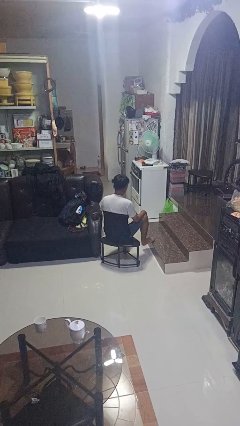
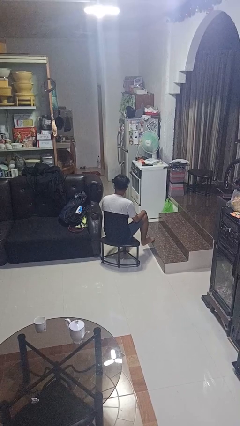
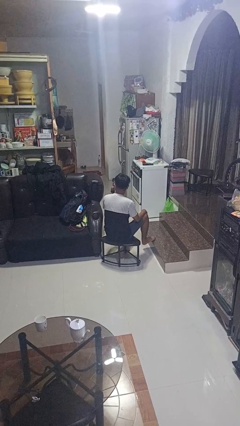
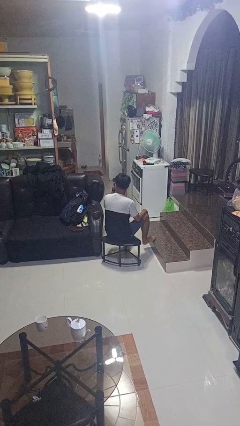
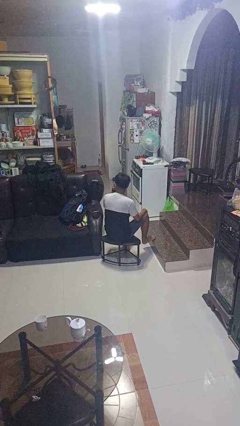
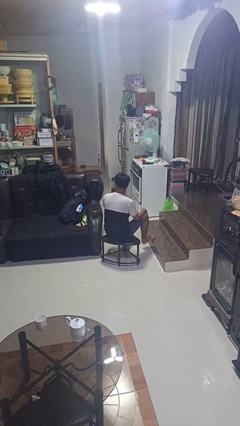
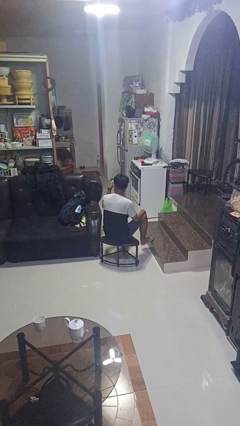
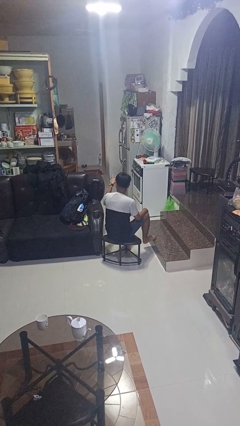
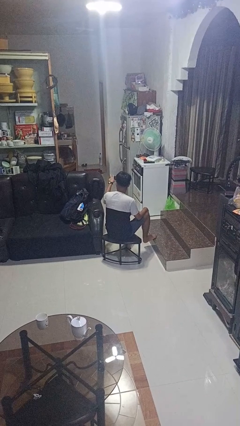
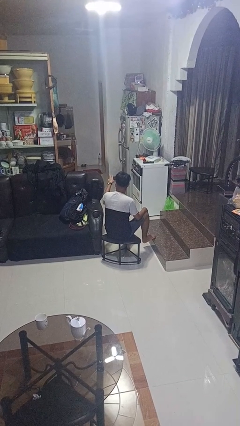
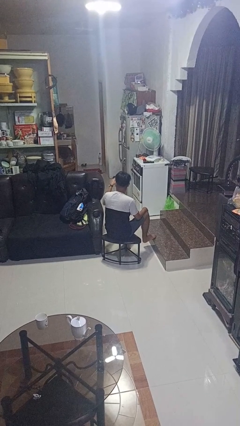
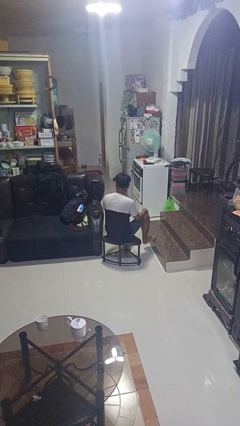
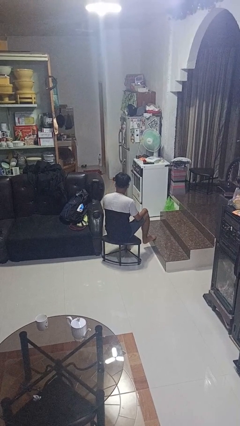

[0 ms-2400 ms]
person gestures watch closely

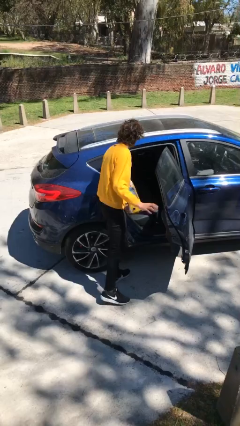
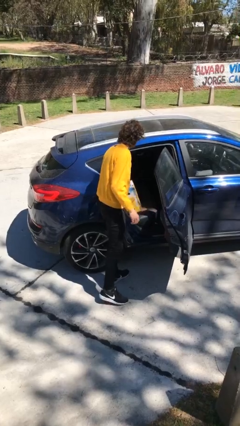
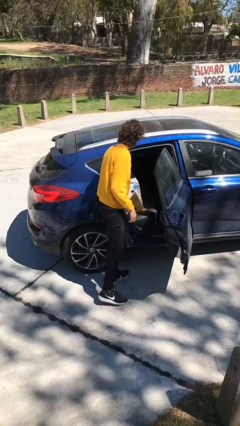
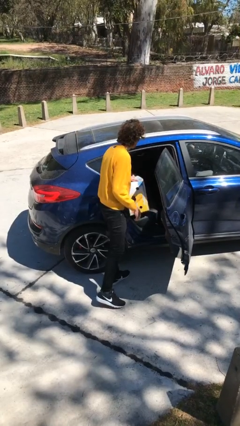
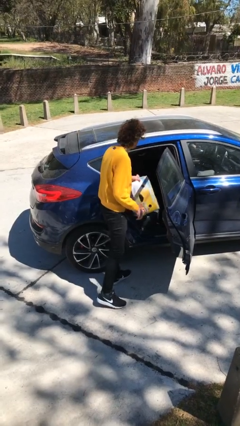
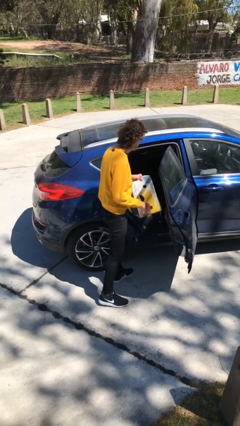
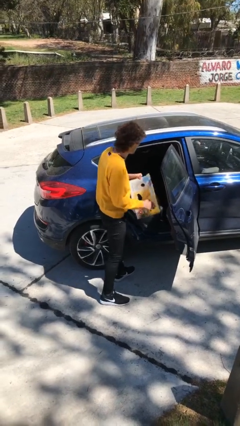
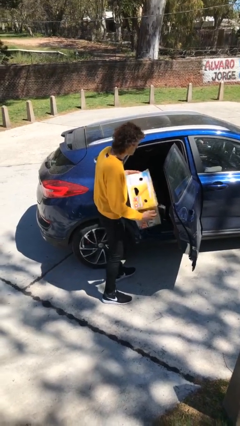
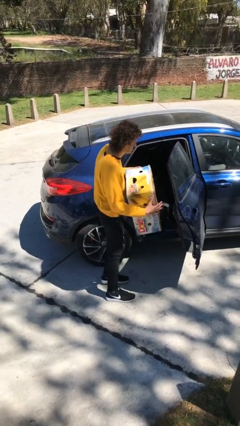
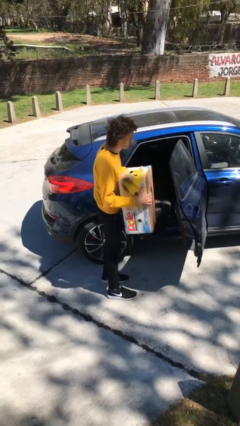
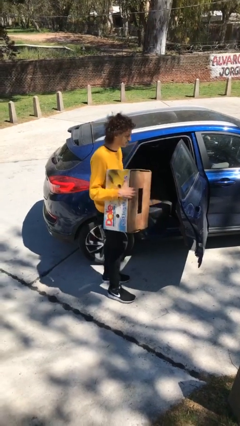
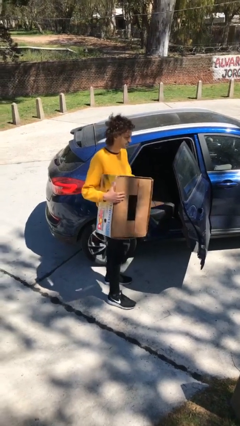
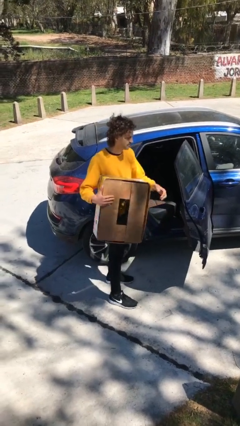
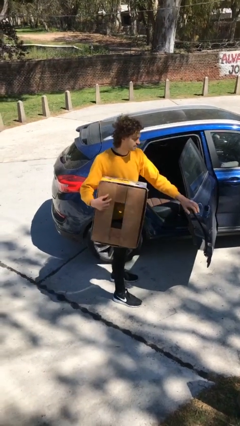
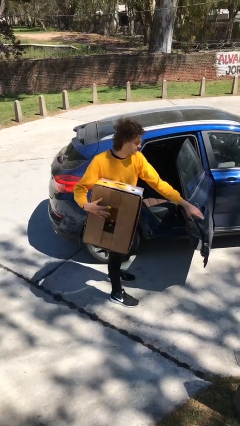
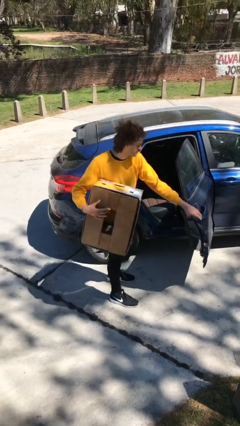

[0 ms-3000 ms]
person unloads car

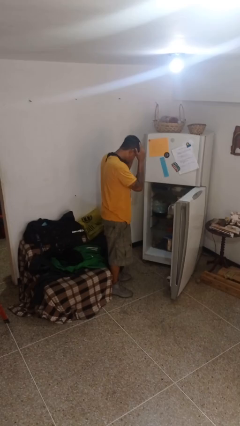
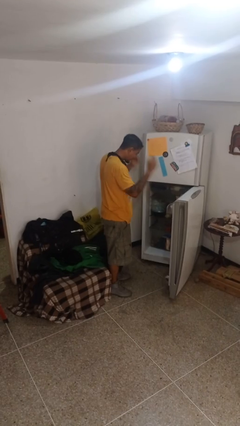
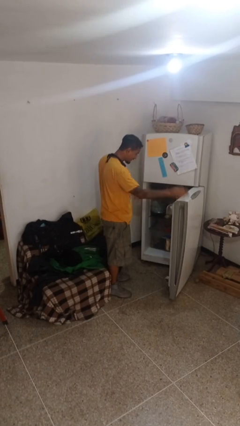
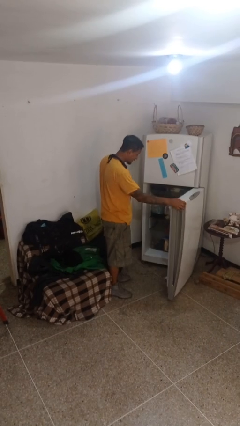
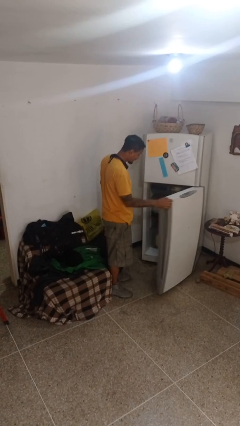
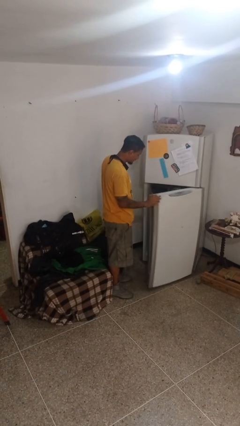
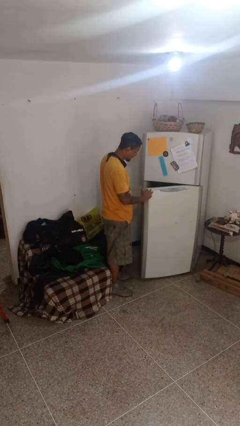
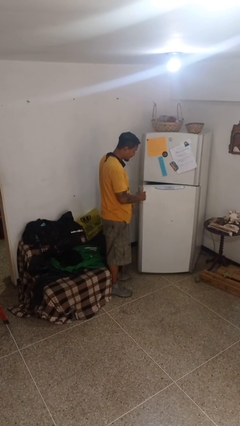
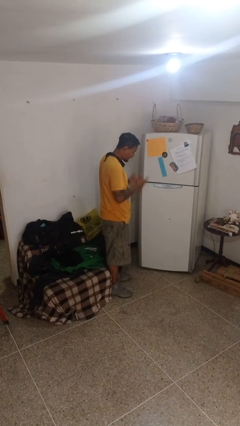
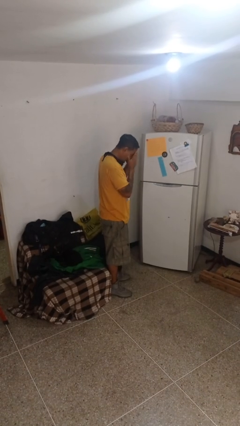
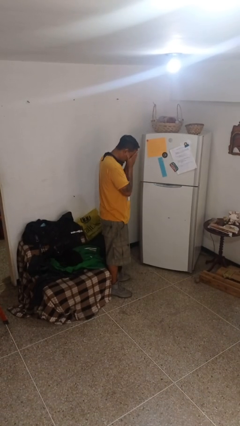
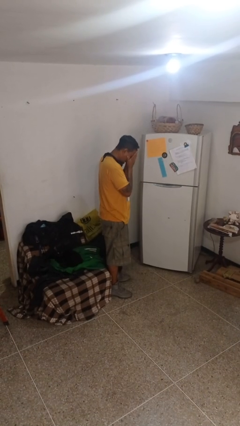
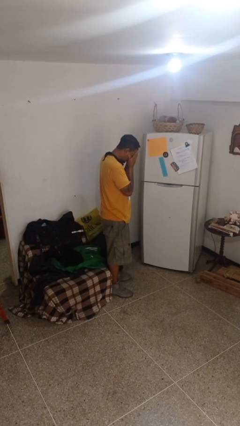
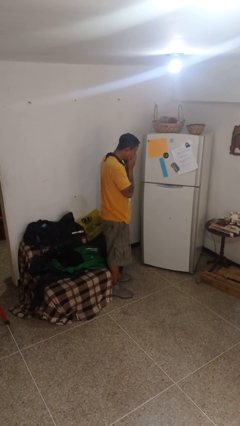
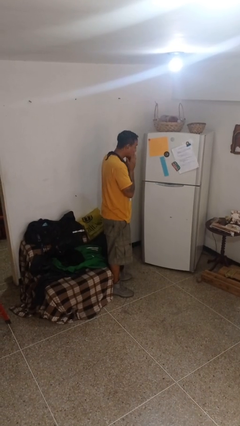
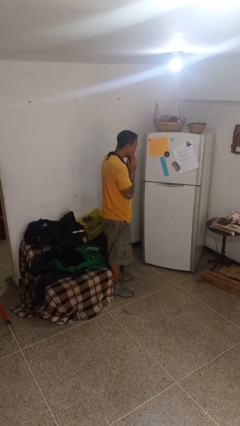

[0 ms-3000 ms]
person closes refrigerator

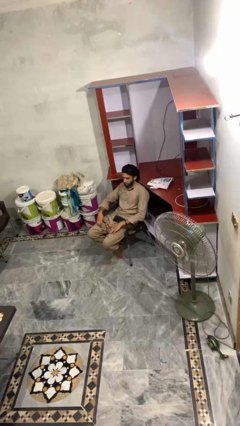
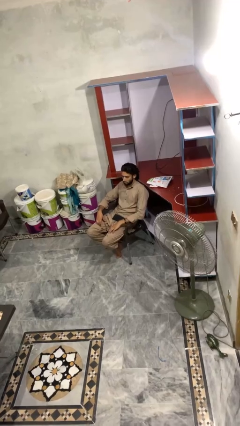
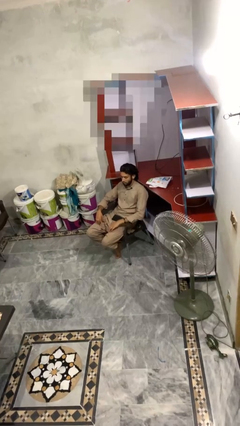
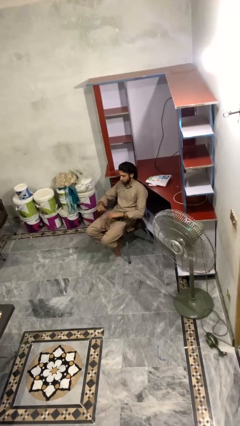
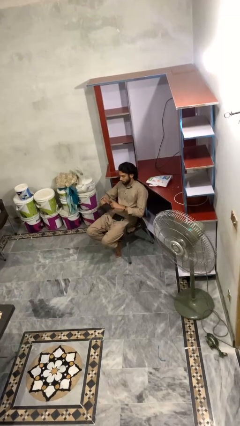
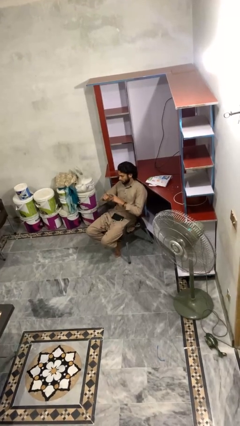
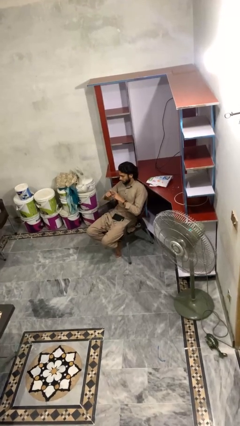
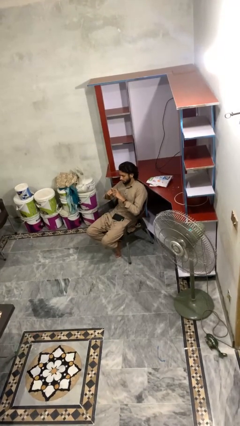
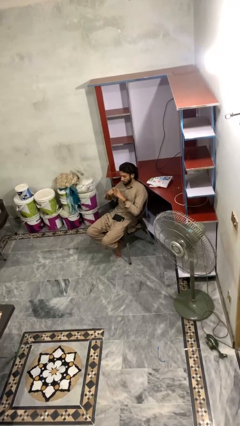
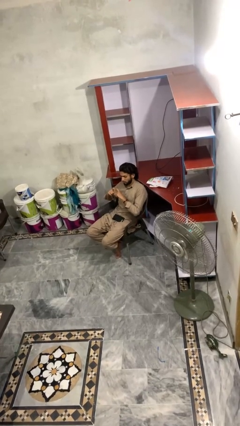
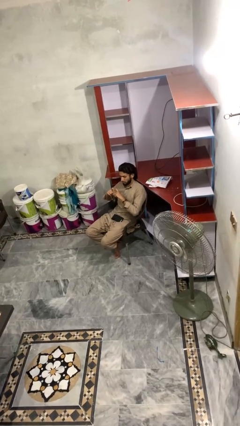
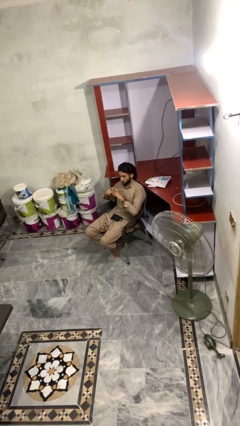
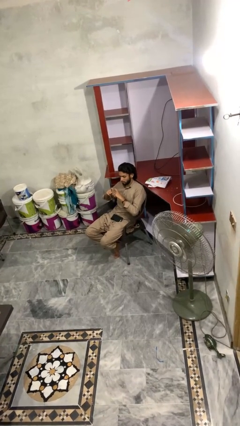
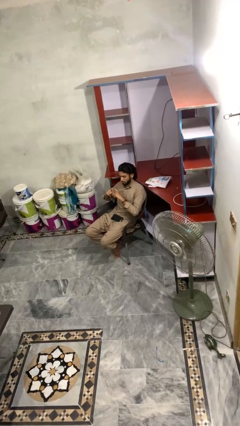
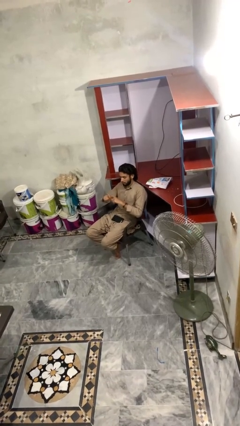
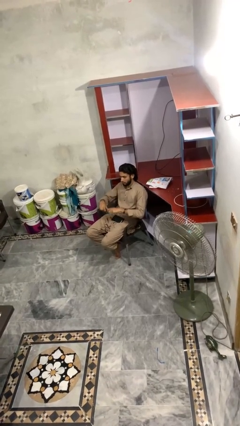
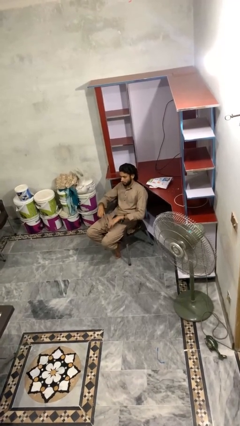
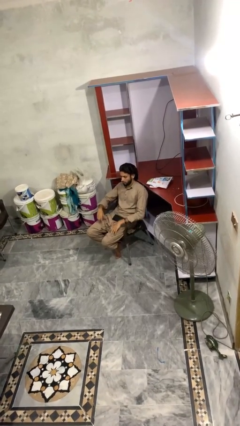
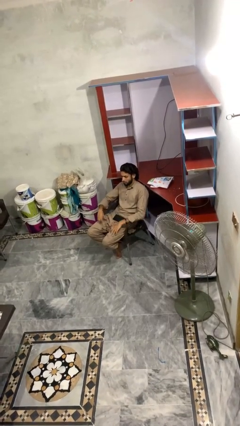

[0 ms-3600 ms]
person gestures heart

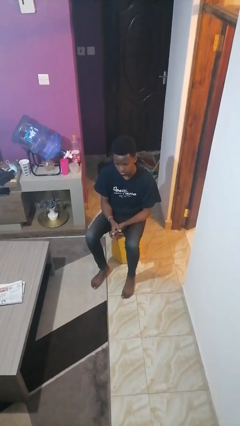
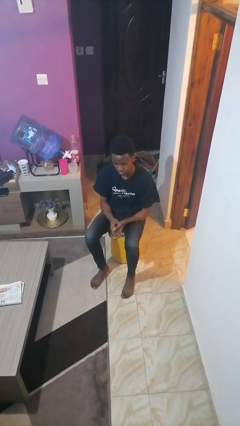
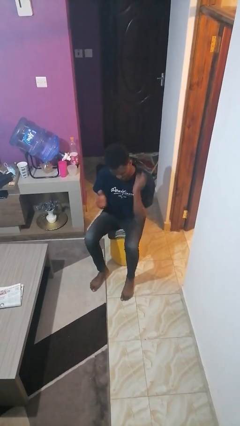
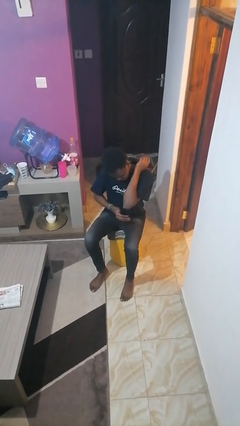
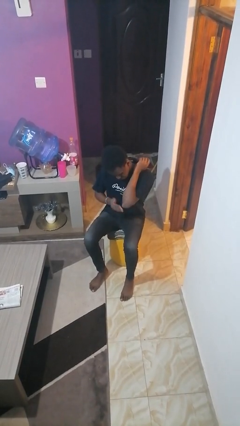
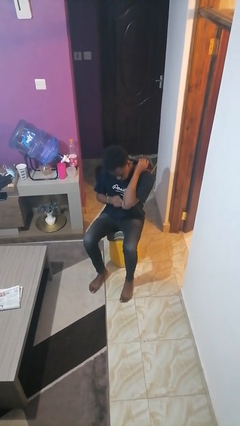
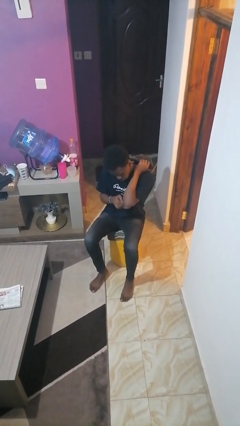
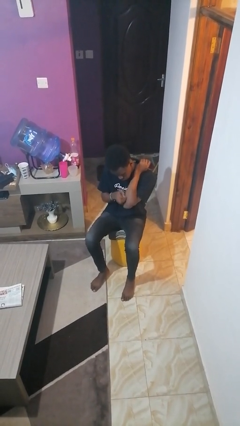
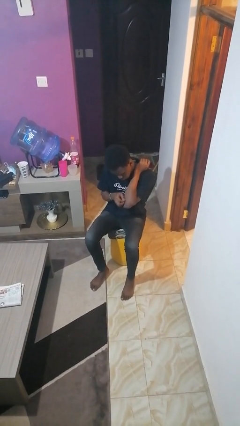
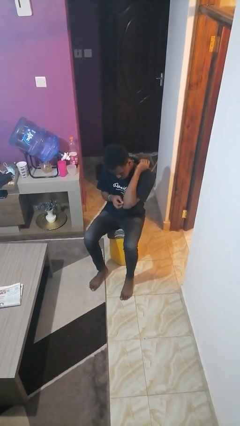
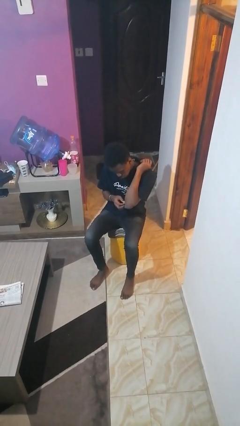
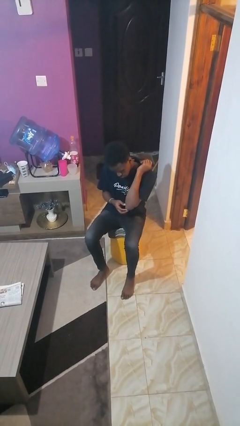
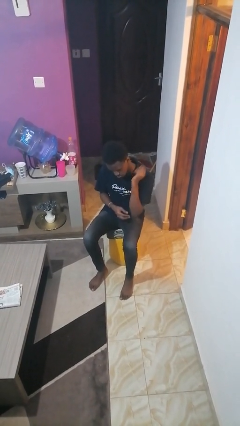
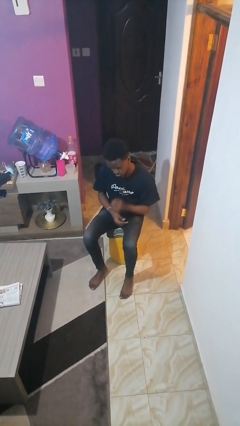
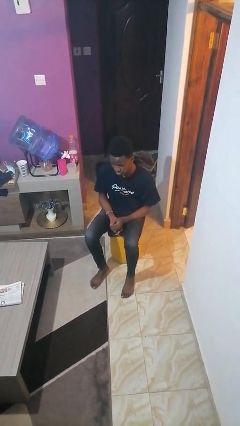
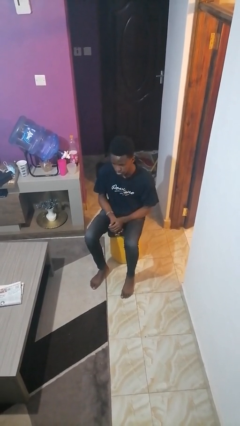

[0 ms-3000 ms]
person swats bug

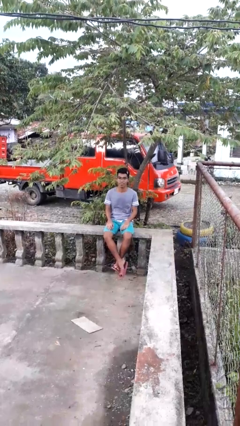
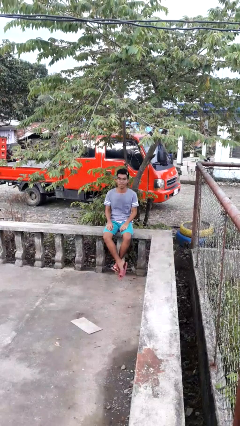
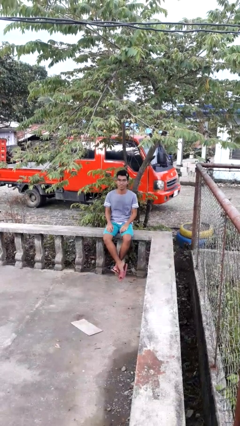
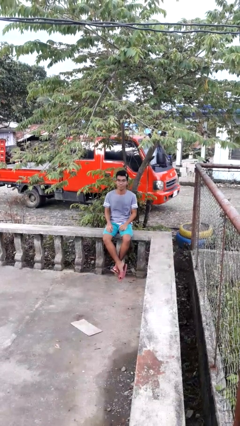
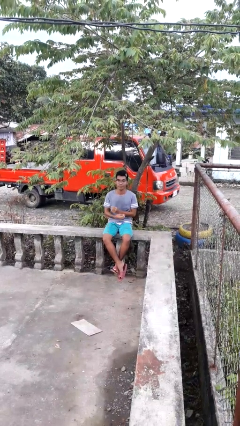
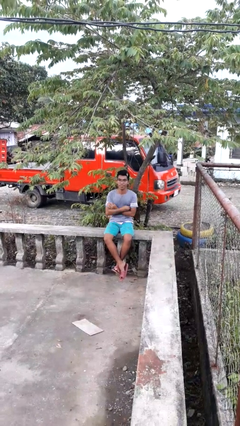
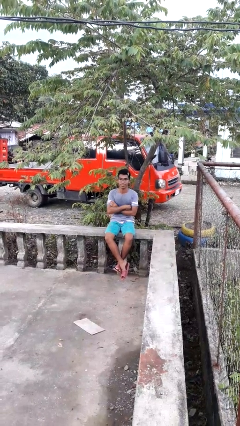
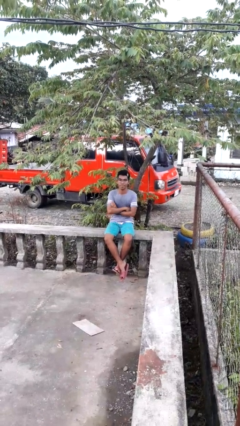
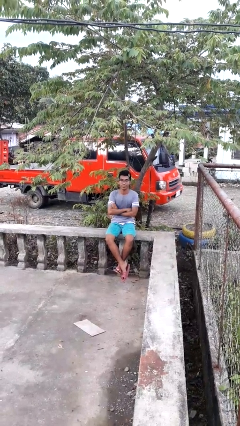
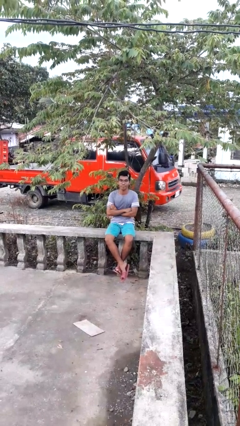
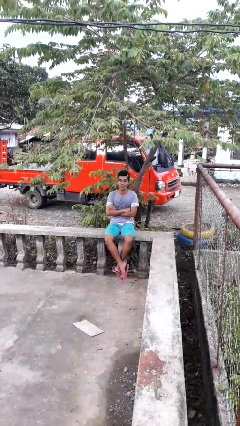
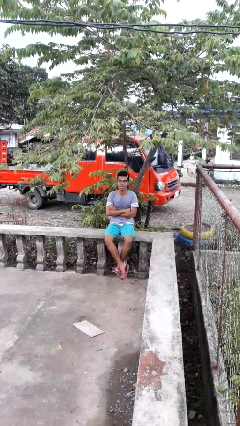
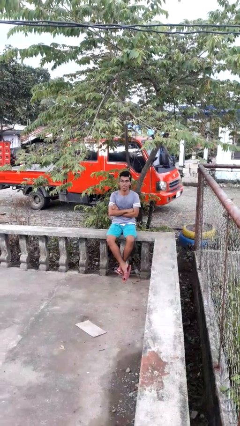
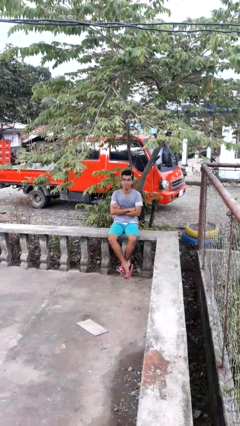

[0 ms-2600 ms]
person crosses arms

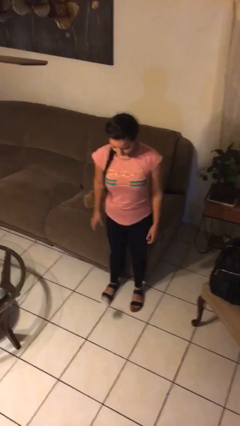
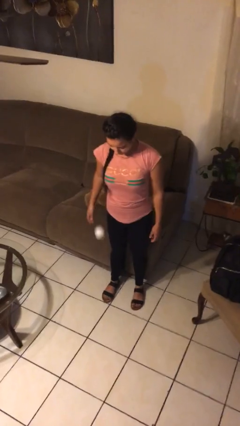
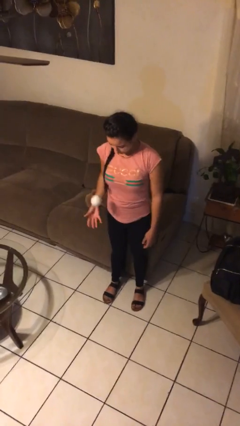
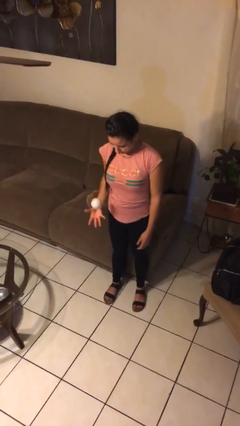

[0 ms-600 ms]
person bounces ball on floor
